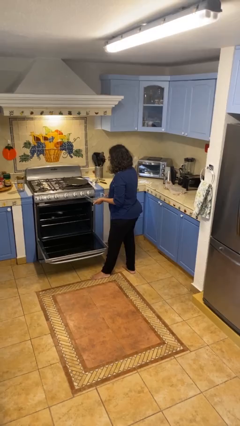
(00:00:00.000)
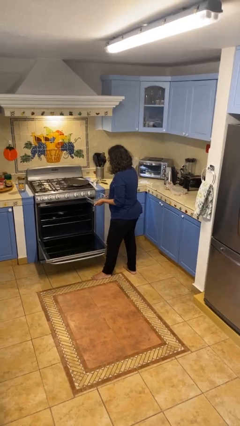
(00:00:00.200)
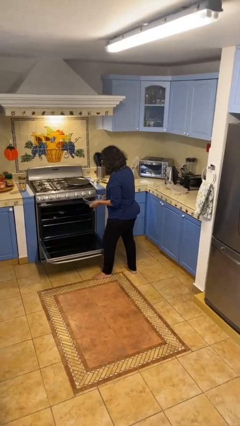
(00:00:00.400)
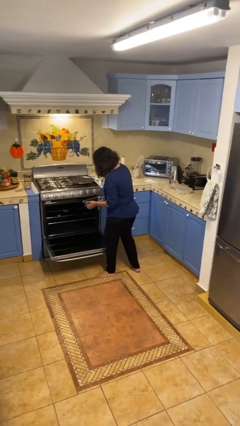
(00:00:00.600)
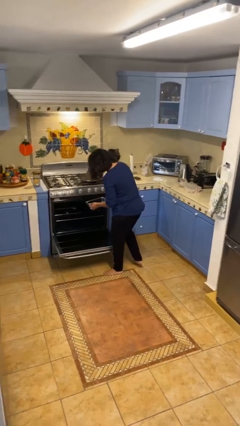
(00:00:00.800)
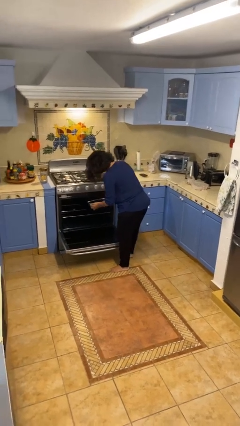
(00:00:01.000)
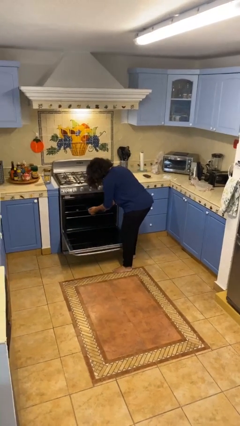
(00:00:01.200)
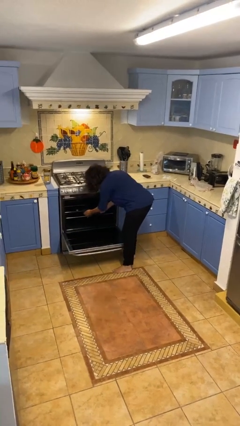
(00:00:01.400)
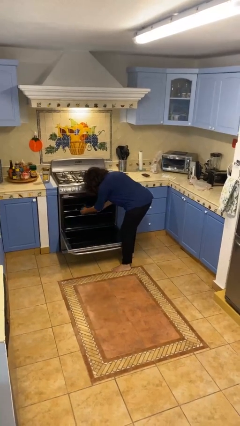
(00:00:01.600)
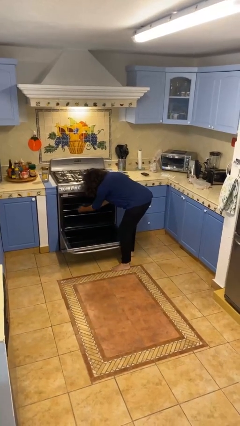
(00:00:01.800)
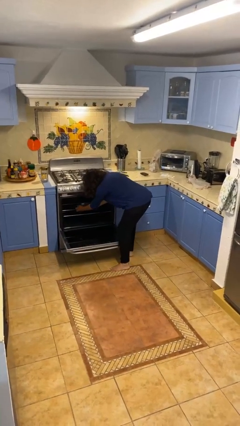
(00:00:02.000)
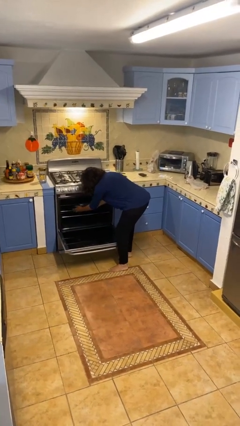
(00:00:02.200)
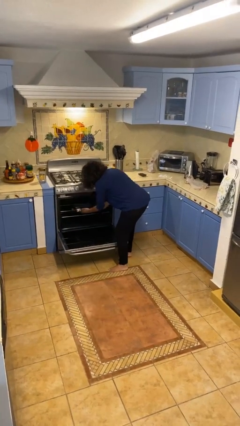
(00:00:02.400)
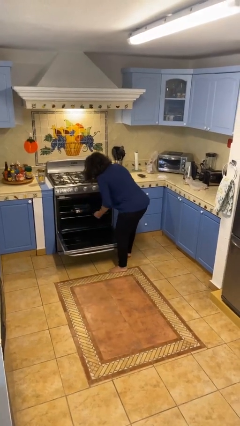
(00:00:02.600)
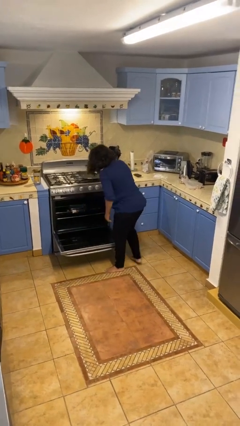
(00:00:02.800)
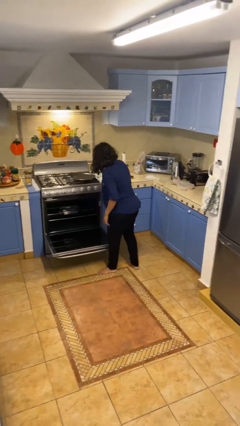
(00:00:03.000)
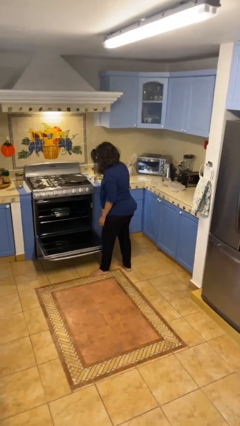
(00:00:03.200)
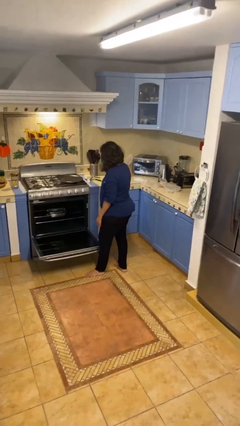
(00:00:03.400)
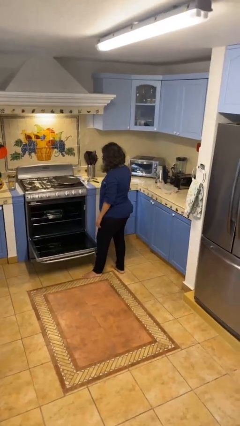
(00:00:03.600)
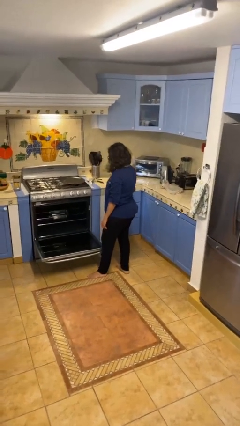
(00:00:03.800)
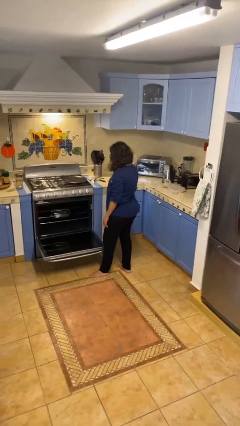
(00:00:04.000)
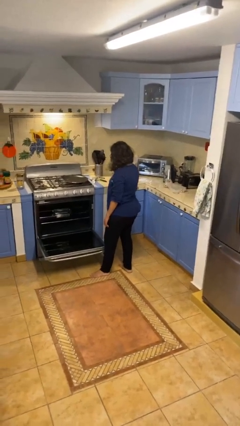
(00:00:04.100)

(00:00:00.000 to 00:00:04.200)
person puts object into oven

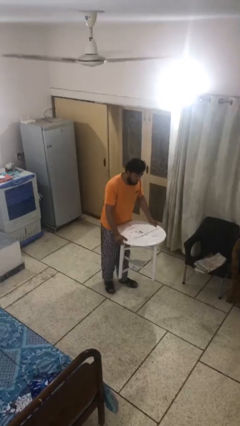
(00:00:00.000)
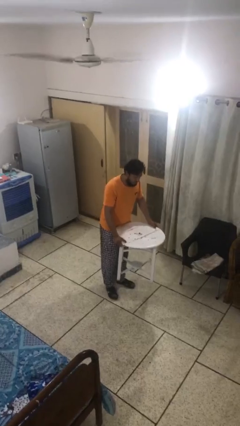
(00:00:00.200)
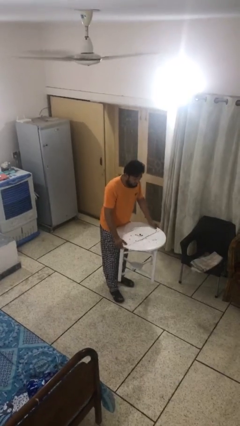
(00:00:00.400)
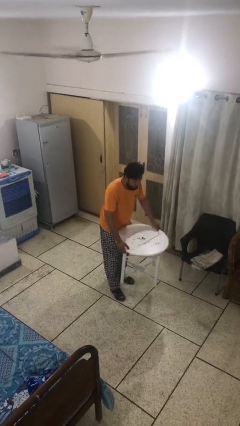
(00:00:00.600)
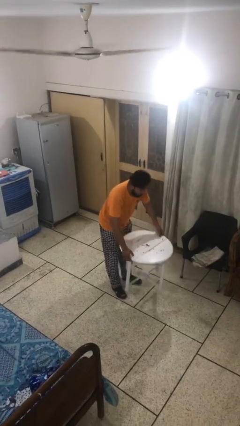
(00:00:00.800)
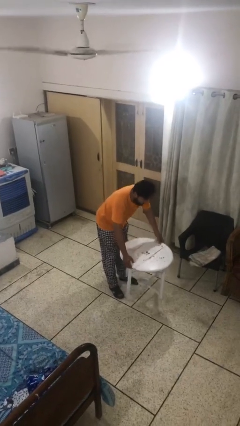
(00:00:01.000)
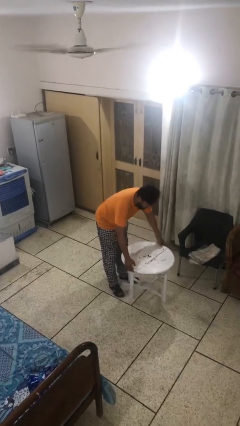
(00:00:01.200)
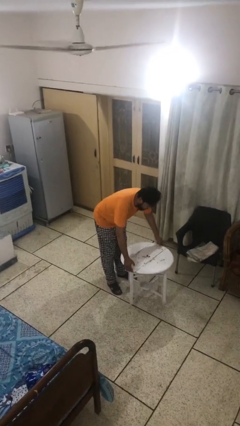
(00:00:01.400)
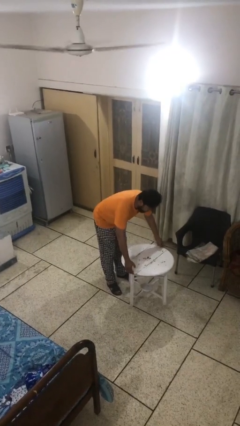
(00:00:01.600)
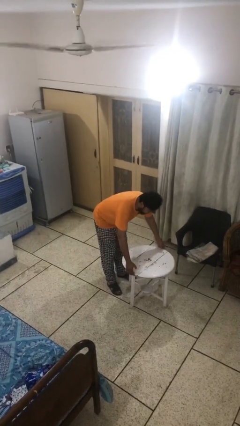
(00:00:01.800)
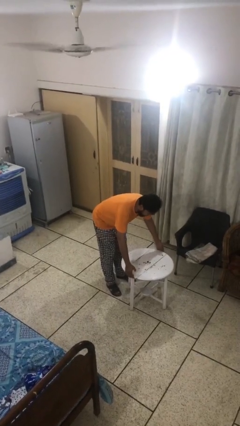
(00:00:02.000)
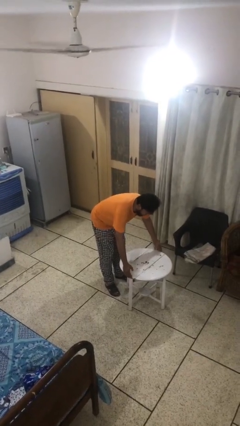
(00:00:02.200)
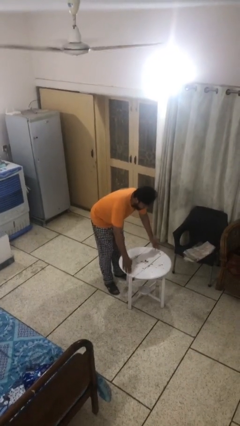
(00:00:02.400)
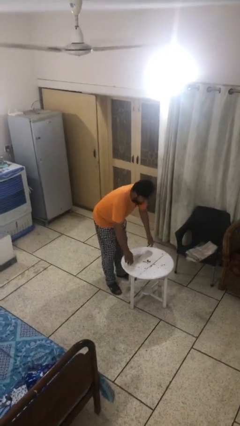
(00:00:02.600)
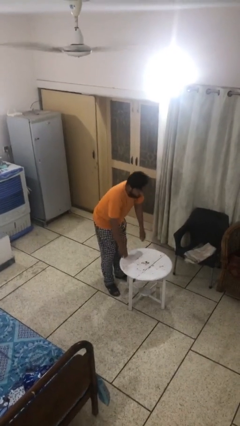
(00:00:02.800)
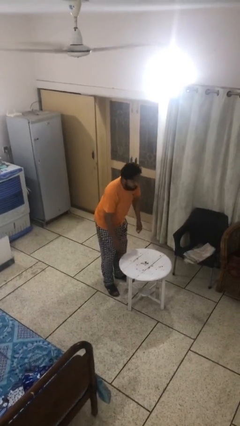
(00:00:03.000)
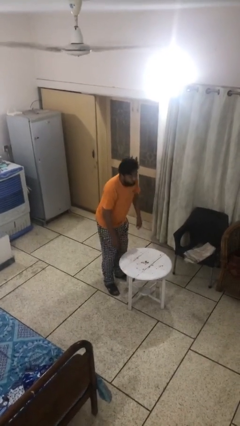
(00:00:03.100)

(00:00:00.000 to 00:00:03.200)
person puts down object on floor

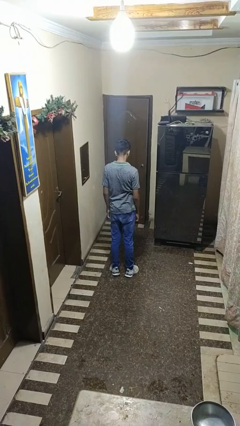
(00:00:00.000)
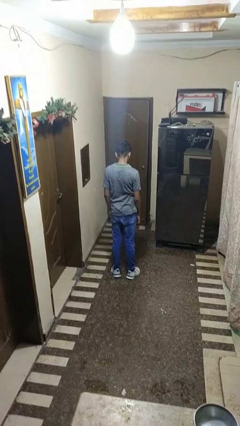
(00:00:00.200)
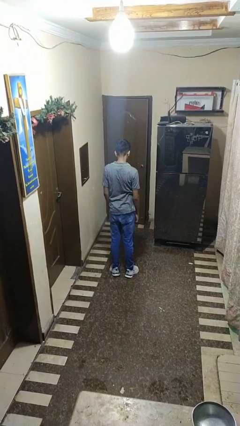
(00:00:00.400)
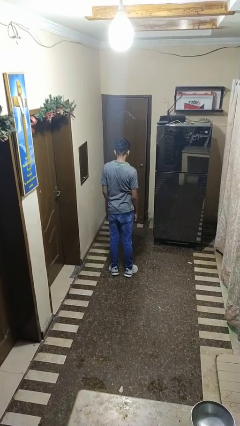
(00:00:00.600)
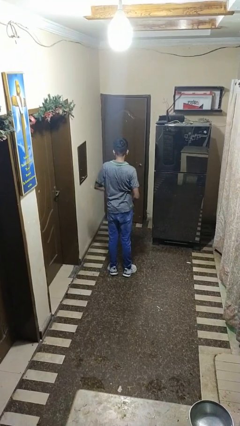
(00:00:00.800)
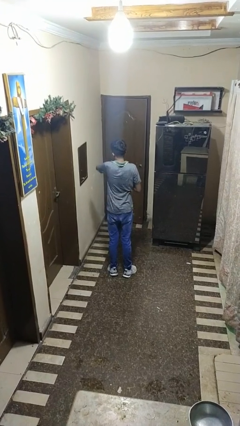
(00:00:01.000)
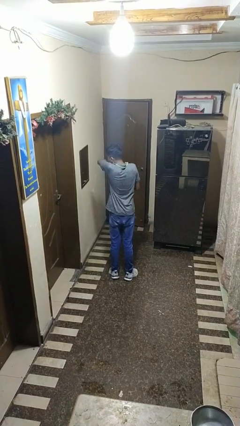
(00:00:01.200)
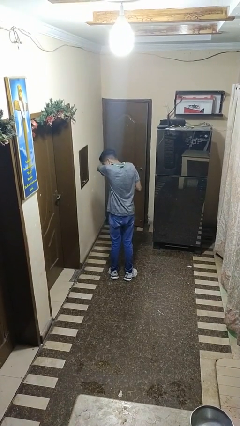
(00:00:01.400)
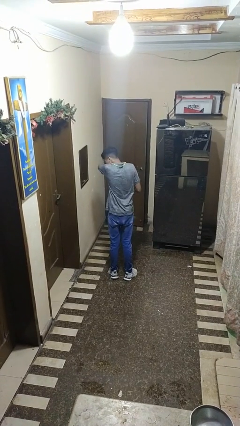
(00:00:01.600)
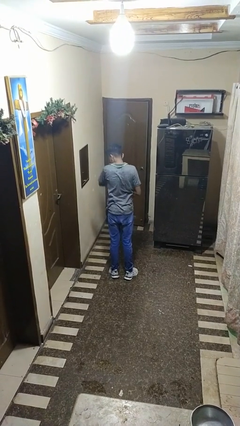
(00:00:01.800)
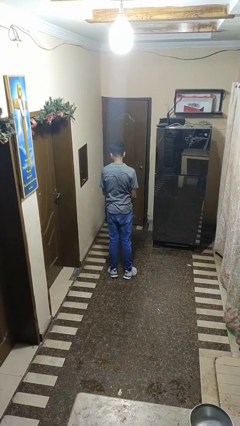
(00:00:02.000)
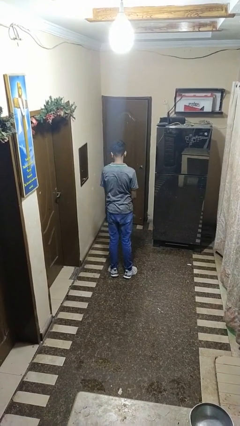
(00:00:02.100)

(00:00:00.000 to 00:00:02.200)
person sneezes into arm

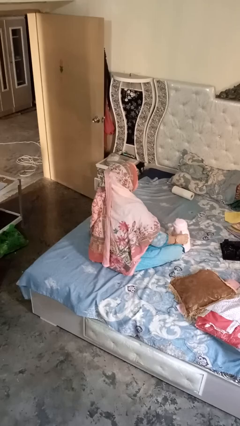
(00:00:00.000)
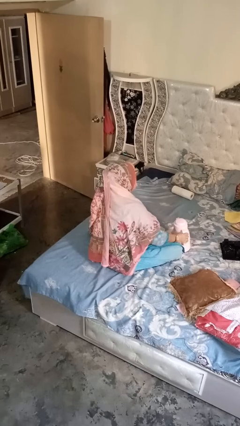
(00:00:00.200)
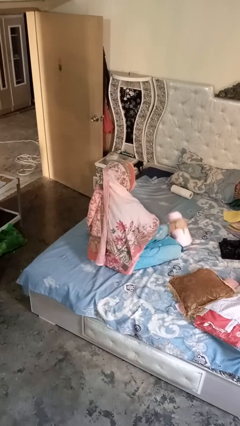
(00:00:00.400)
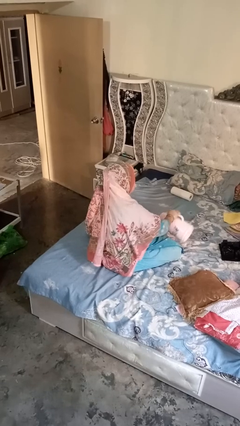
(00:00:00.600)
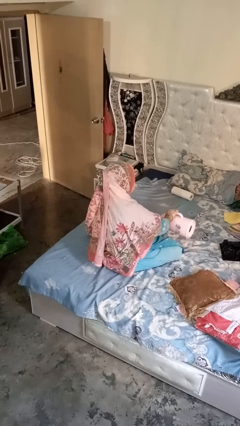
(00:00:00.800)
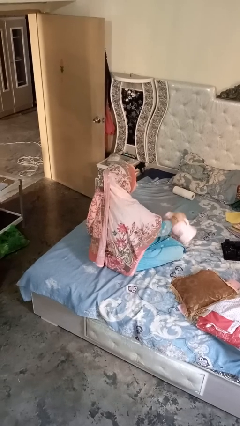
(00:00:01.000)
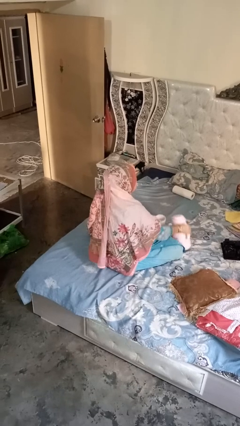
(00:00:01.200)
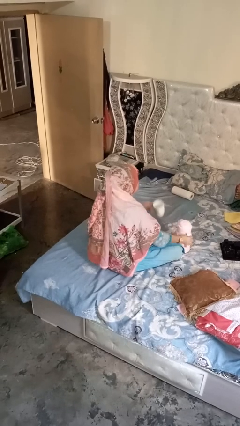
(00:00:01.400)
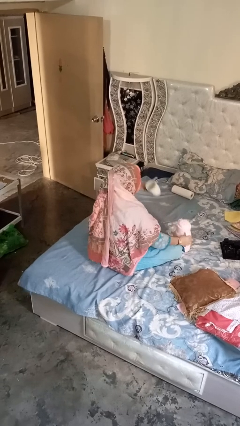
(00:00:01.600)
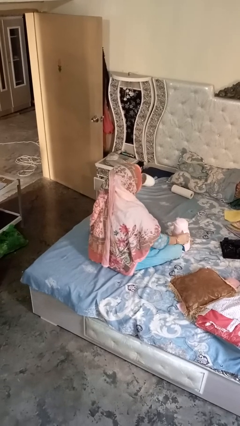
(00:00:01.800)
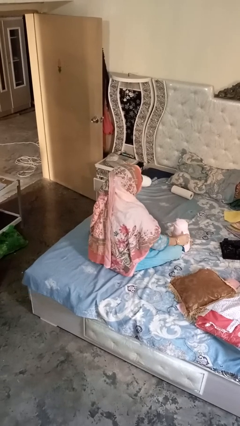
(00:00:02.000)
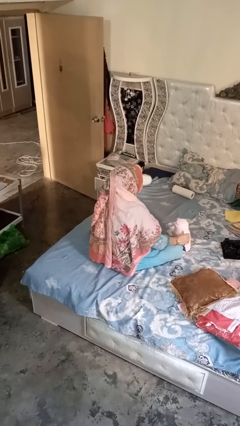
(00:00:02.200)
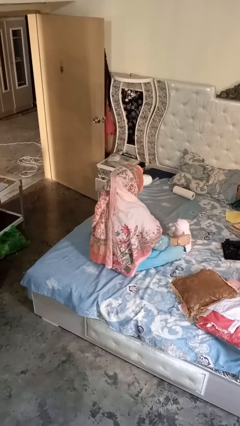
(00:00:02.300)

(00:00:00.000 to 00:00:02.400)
person pours coffee into mug

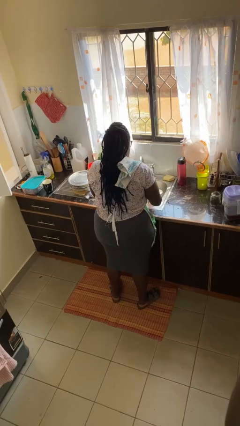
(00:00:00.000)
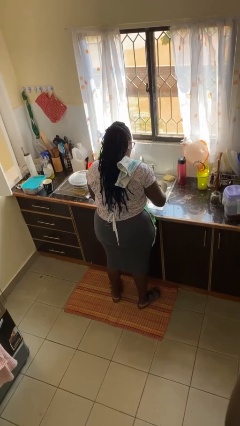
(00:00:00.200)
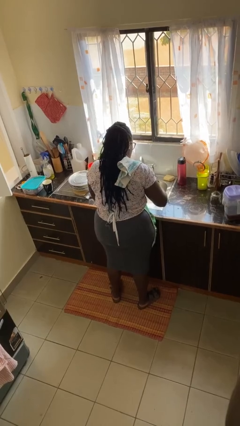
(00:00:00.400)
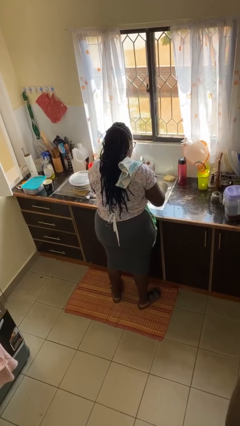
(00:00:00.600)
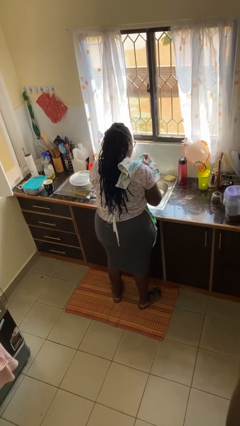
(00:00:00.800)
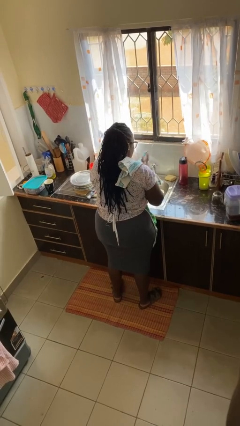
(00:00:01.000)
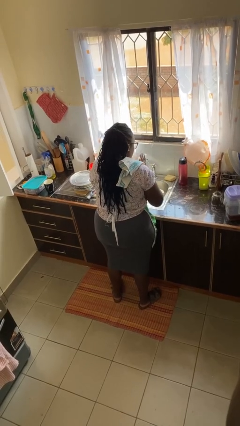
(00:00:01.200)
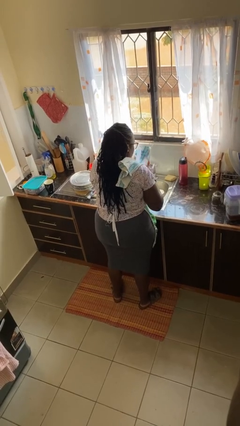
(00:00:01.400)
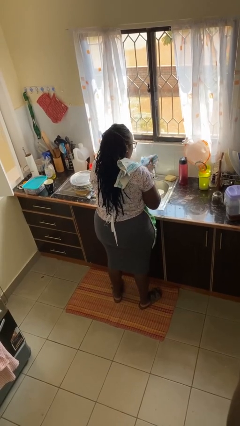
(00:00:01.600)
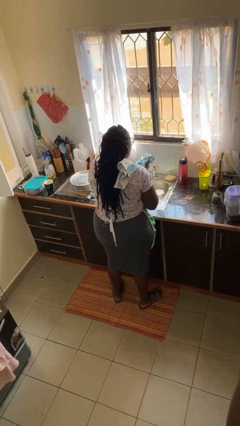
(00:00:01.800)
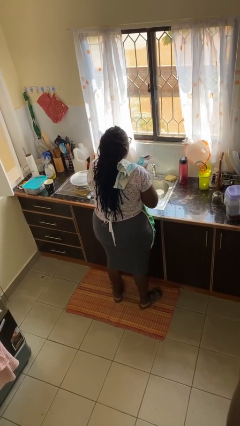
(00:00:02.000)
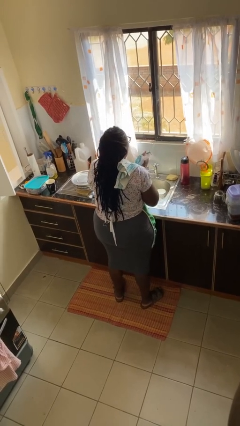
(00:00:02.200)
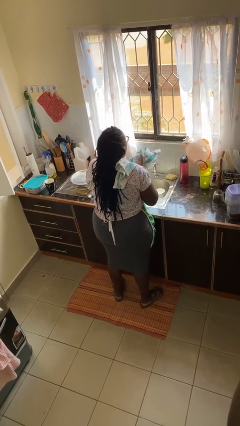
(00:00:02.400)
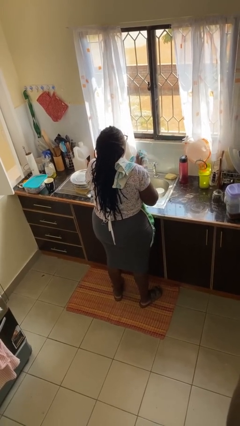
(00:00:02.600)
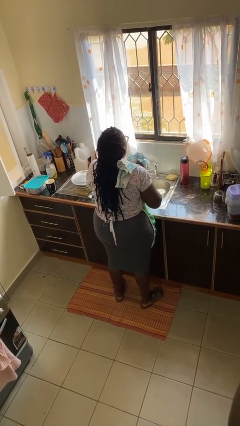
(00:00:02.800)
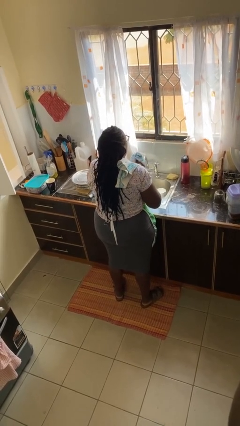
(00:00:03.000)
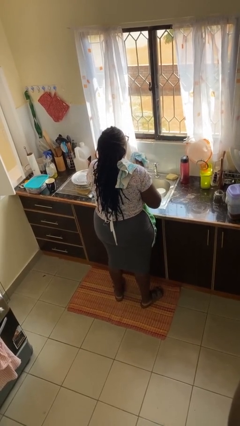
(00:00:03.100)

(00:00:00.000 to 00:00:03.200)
person dries hands with towel

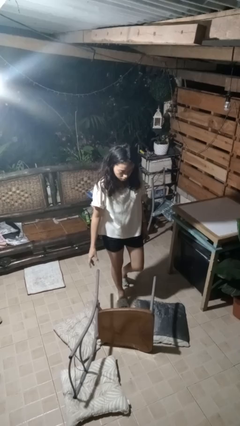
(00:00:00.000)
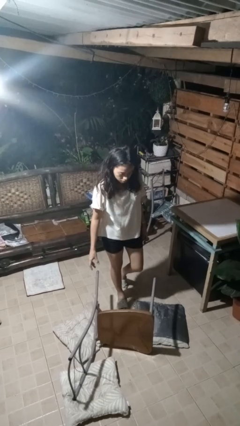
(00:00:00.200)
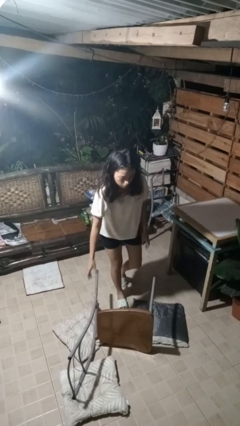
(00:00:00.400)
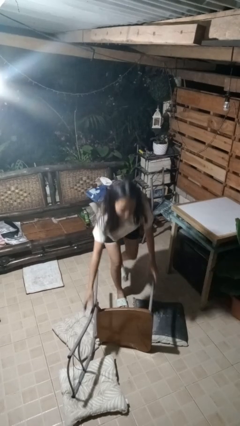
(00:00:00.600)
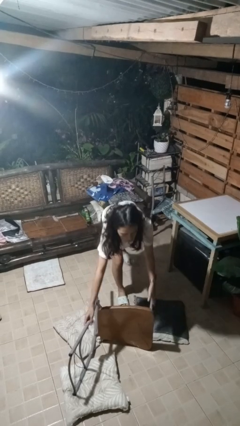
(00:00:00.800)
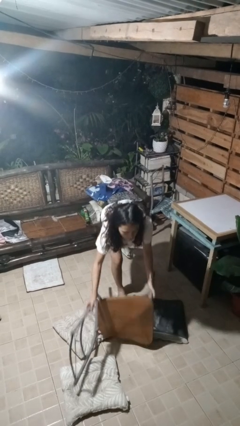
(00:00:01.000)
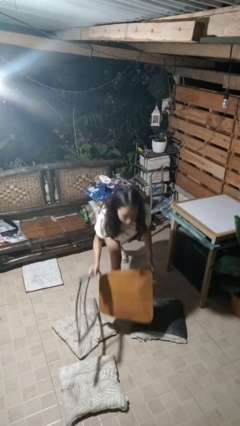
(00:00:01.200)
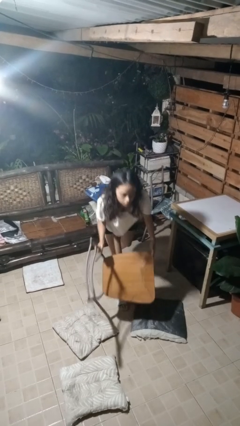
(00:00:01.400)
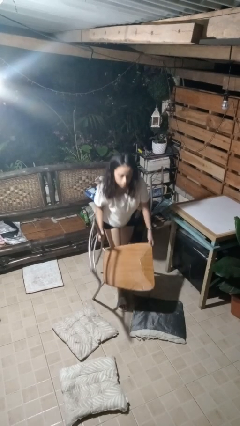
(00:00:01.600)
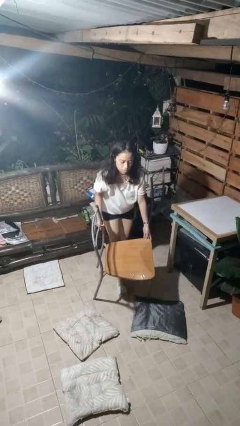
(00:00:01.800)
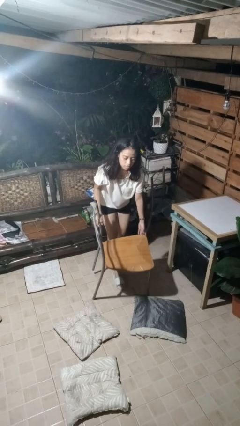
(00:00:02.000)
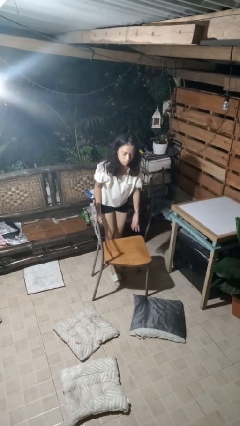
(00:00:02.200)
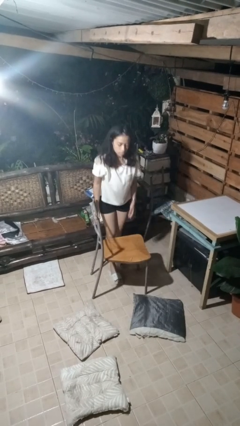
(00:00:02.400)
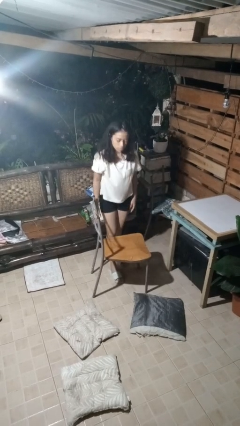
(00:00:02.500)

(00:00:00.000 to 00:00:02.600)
person sets upright furniture
